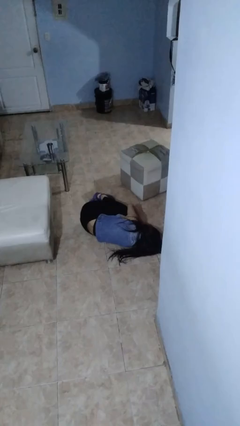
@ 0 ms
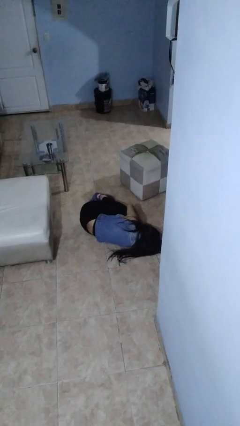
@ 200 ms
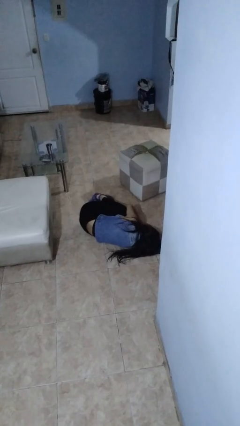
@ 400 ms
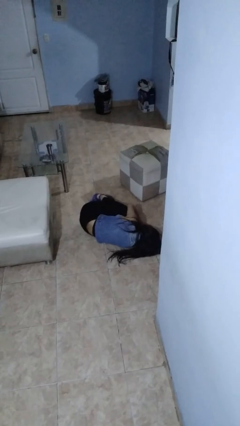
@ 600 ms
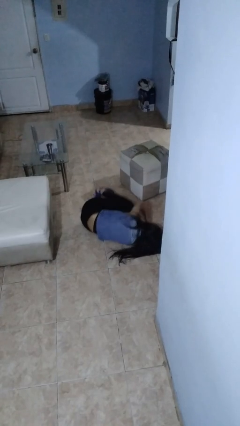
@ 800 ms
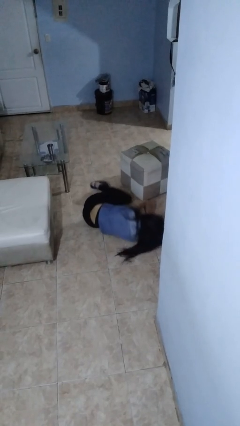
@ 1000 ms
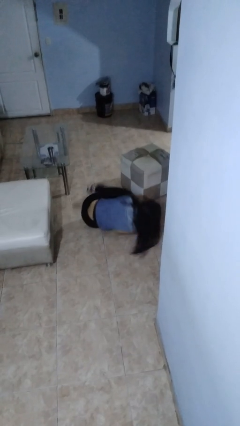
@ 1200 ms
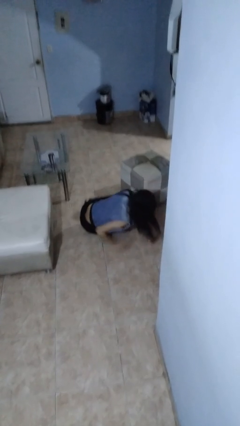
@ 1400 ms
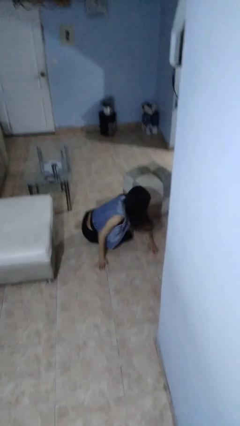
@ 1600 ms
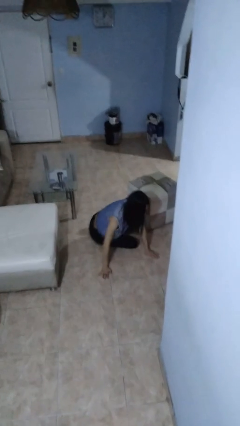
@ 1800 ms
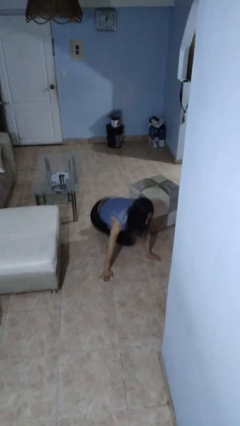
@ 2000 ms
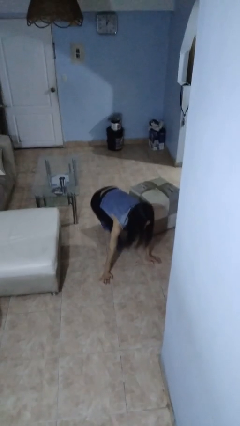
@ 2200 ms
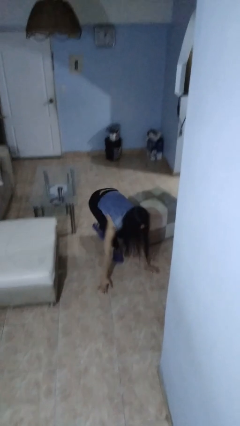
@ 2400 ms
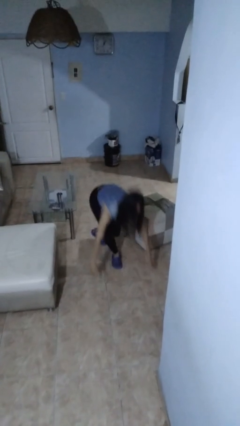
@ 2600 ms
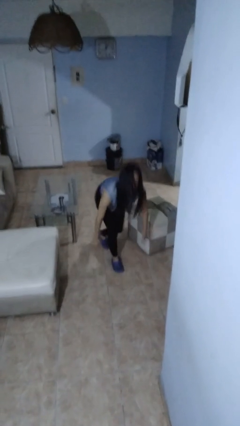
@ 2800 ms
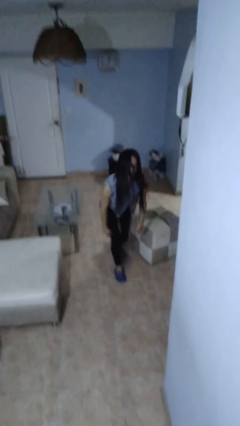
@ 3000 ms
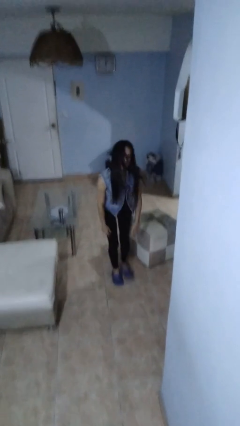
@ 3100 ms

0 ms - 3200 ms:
person stands up from floor

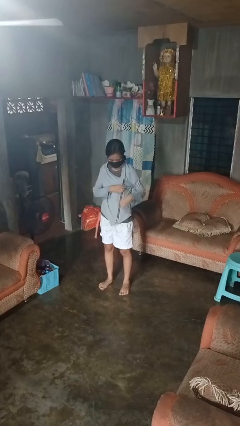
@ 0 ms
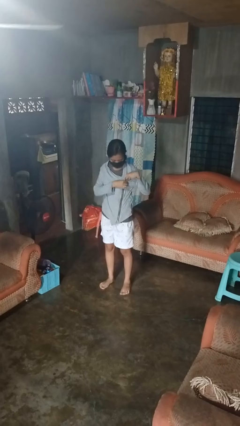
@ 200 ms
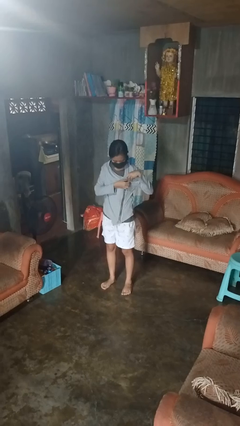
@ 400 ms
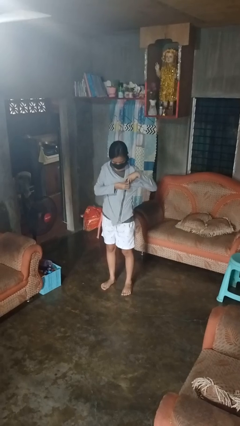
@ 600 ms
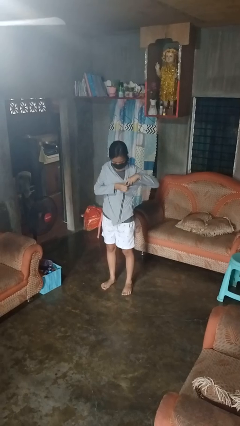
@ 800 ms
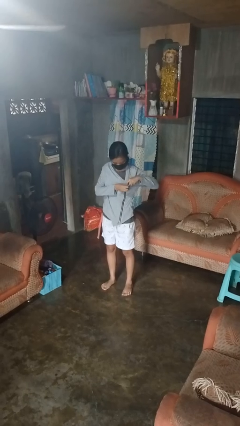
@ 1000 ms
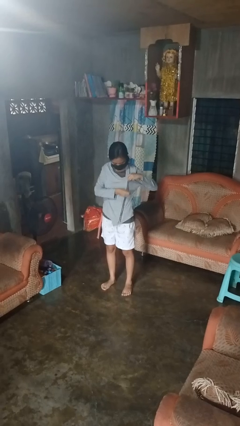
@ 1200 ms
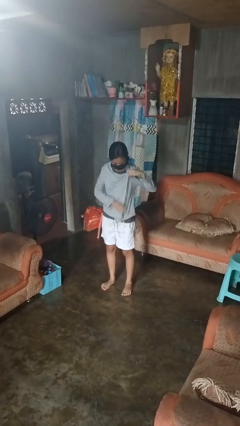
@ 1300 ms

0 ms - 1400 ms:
person unzips jacket

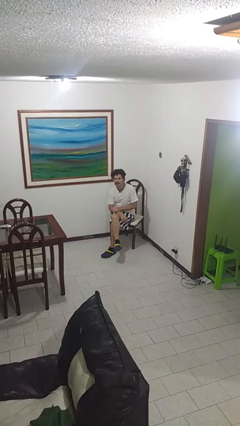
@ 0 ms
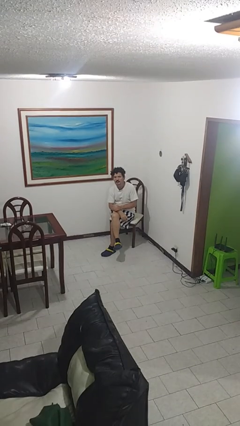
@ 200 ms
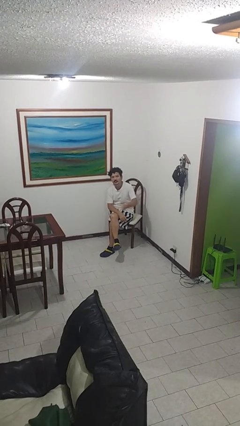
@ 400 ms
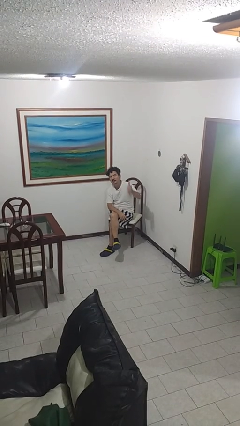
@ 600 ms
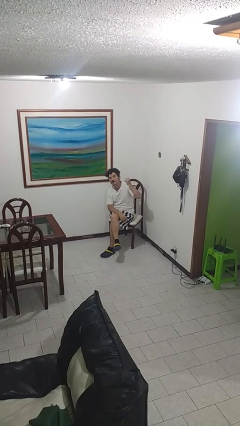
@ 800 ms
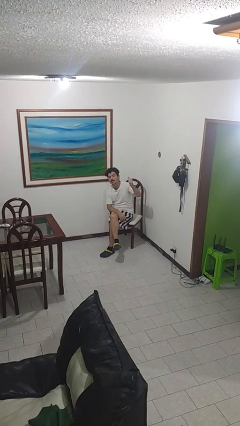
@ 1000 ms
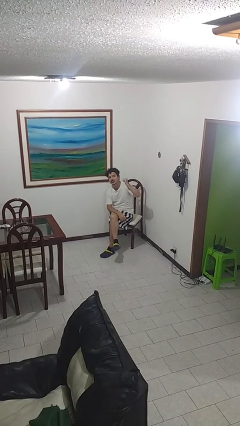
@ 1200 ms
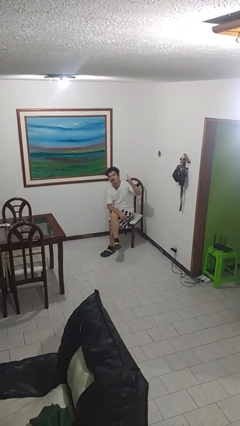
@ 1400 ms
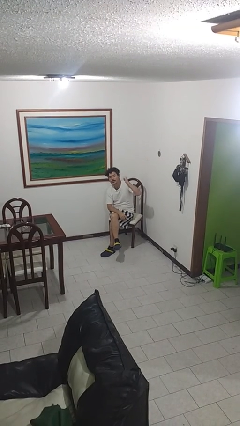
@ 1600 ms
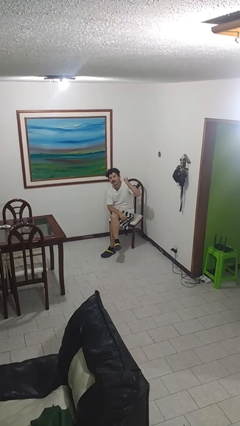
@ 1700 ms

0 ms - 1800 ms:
person gestures behind me

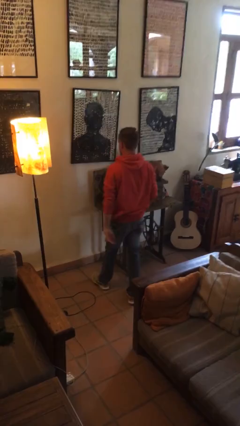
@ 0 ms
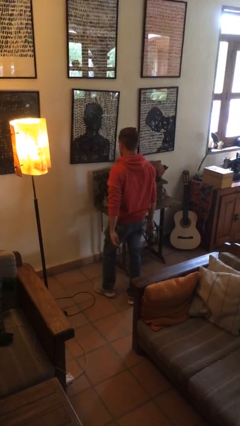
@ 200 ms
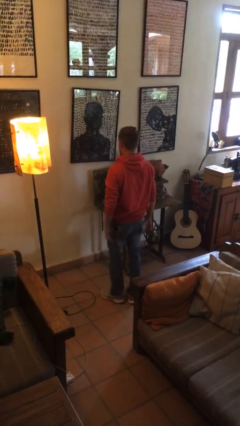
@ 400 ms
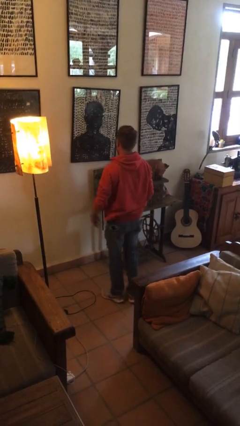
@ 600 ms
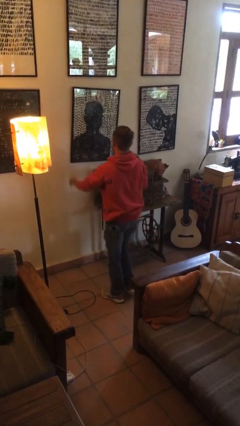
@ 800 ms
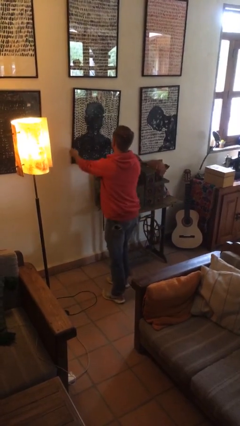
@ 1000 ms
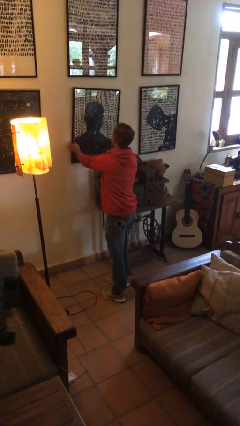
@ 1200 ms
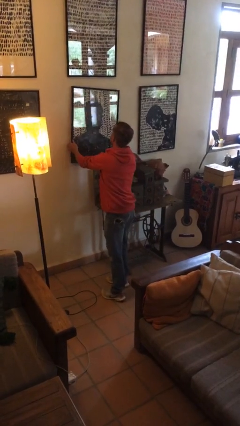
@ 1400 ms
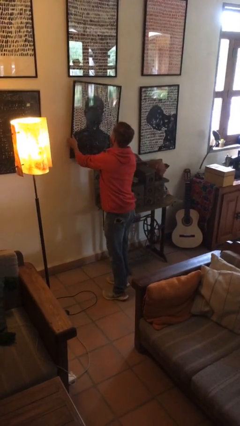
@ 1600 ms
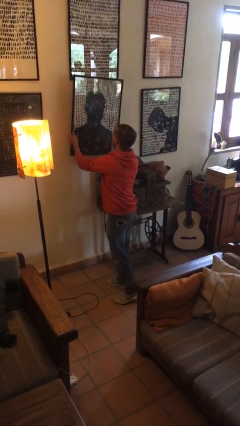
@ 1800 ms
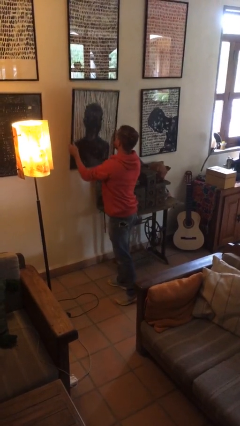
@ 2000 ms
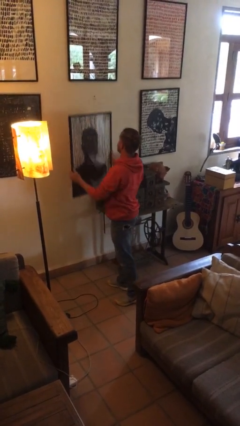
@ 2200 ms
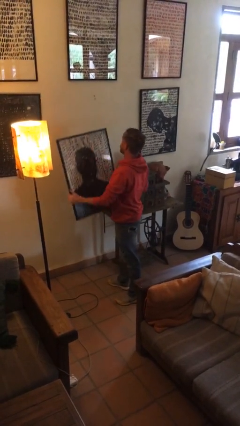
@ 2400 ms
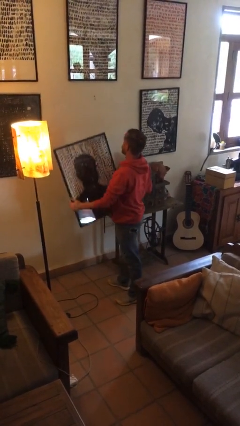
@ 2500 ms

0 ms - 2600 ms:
person takes down picture frame

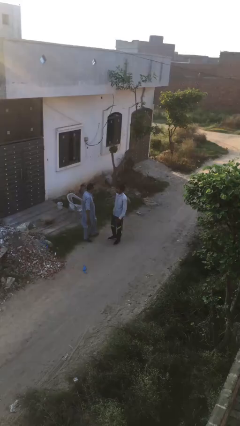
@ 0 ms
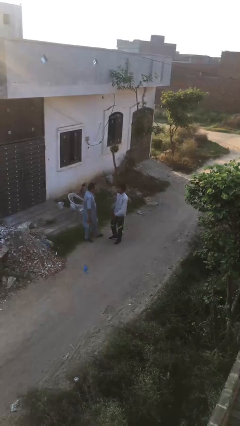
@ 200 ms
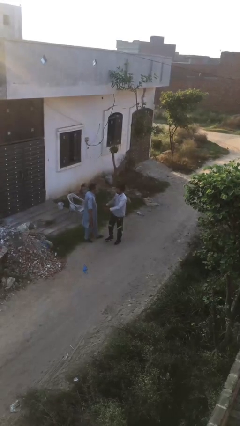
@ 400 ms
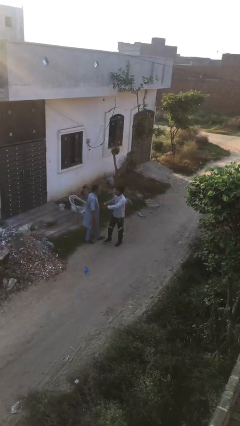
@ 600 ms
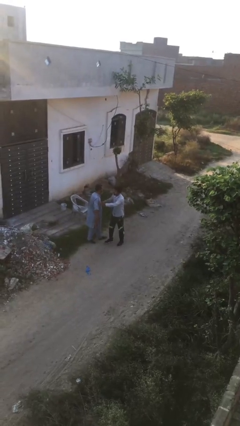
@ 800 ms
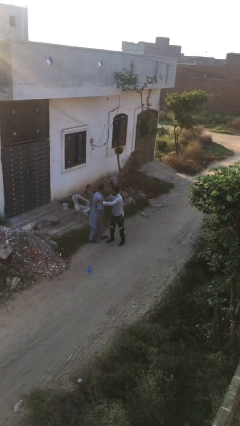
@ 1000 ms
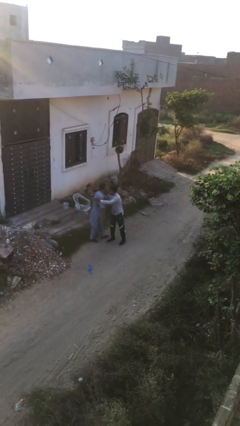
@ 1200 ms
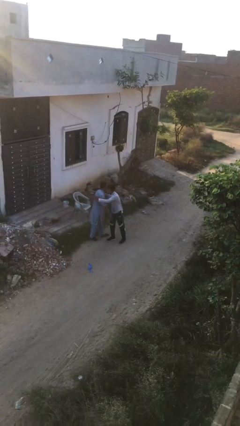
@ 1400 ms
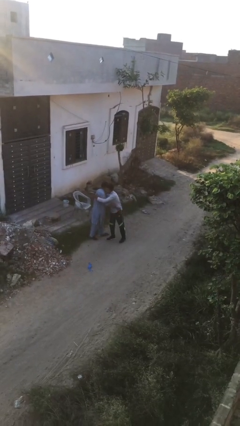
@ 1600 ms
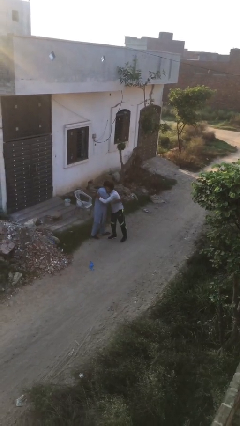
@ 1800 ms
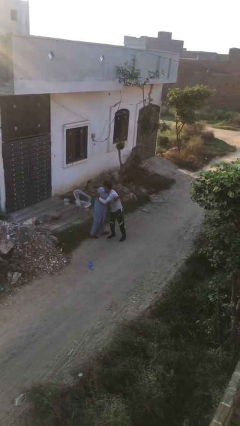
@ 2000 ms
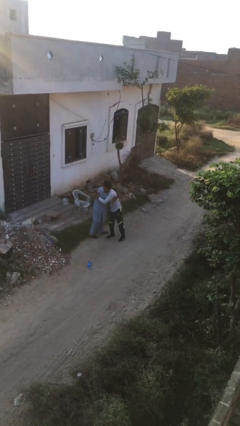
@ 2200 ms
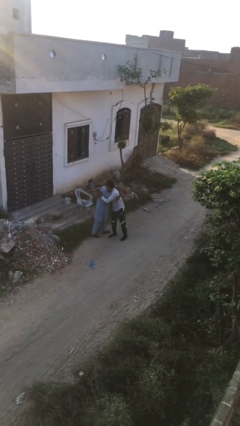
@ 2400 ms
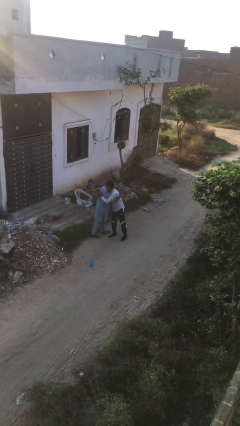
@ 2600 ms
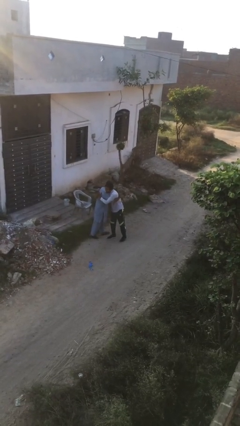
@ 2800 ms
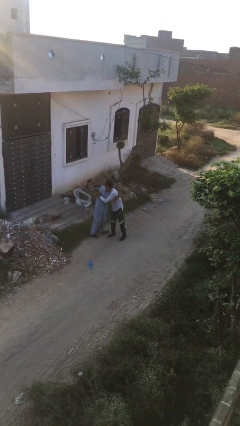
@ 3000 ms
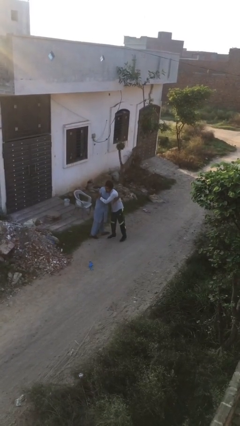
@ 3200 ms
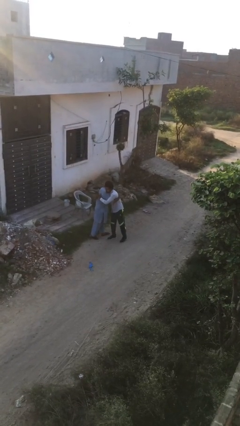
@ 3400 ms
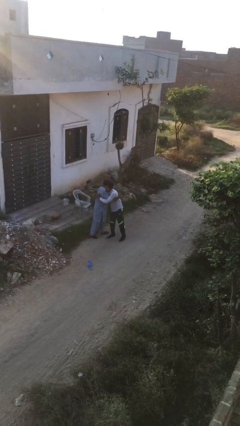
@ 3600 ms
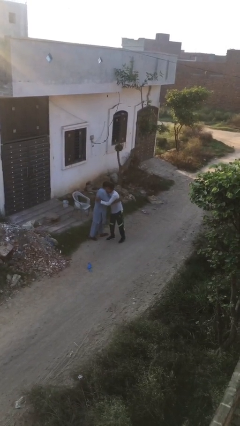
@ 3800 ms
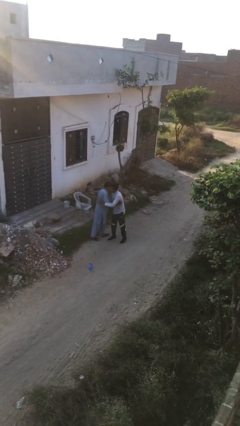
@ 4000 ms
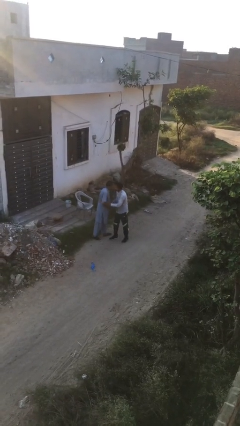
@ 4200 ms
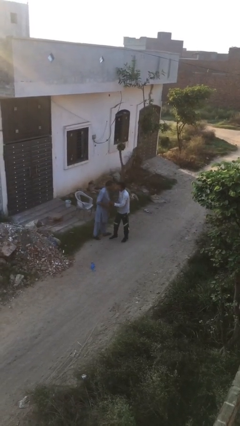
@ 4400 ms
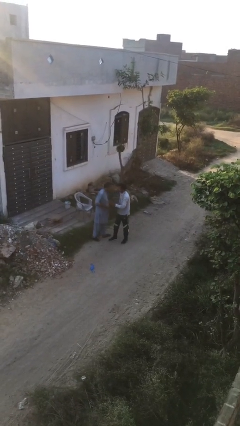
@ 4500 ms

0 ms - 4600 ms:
person embraces person

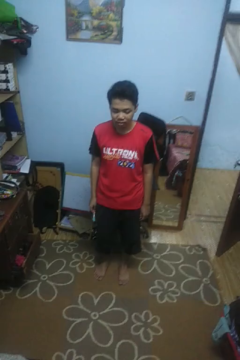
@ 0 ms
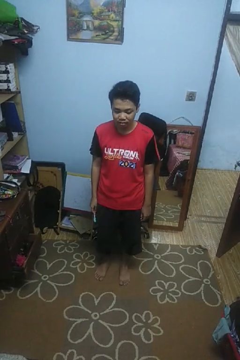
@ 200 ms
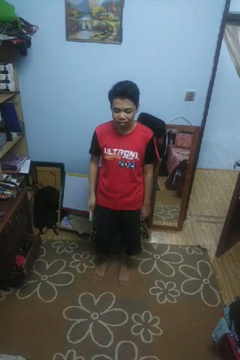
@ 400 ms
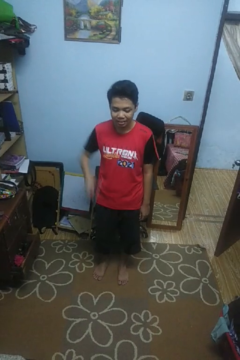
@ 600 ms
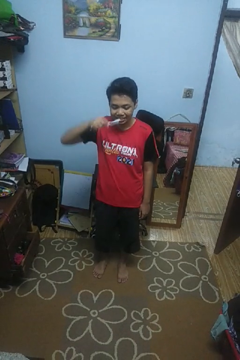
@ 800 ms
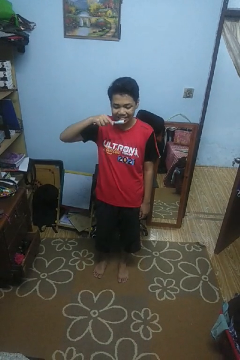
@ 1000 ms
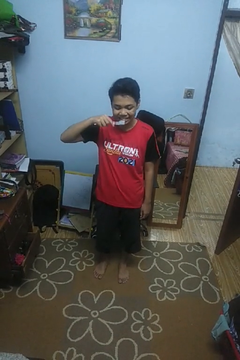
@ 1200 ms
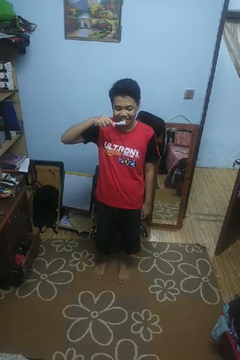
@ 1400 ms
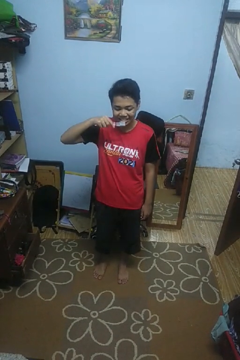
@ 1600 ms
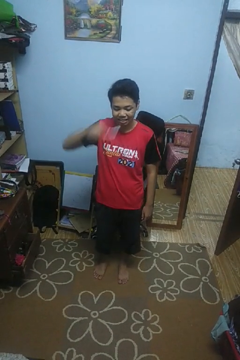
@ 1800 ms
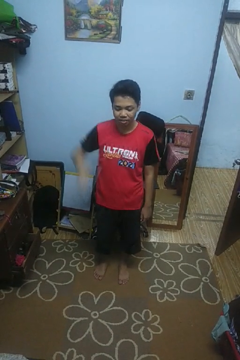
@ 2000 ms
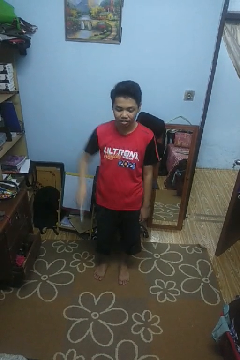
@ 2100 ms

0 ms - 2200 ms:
person brushes teeth

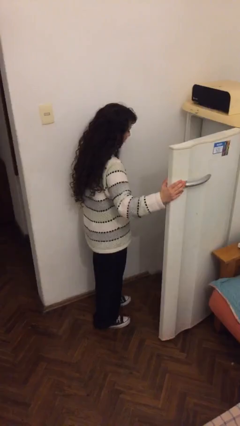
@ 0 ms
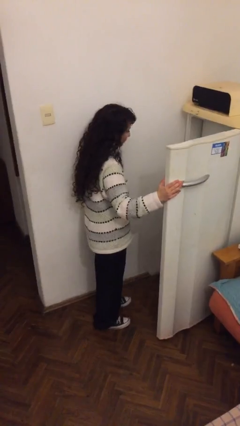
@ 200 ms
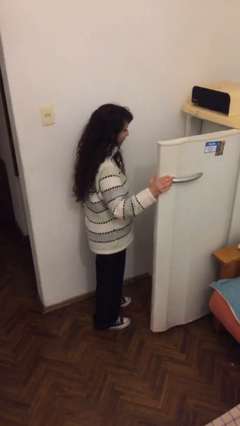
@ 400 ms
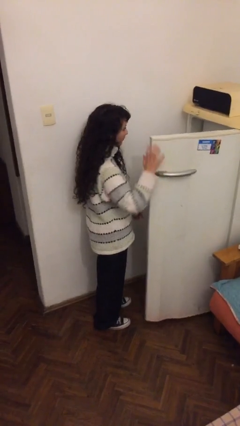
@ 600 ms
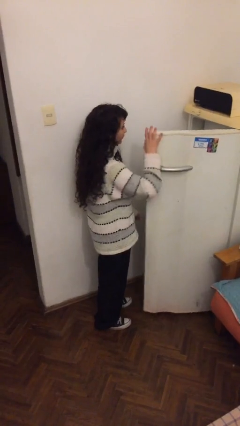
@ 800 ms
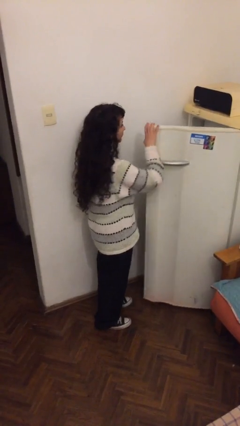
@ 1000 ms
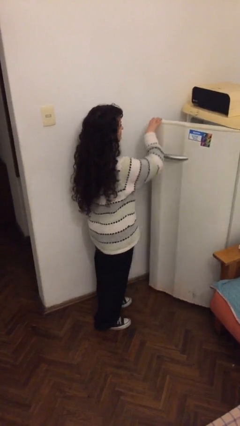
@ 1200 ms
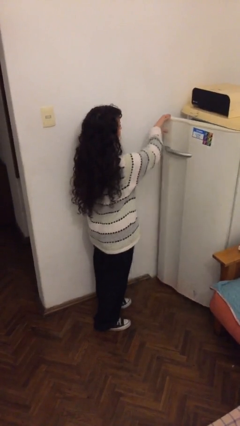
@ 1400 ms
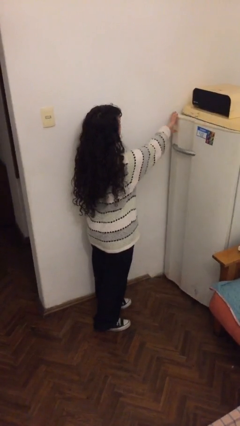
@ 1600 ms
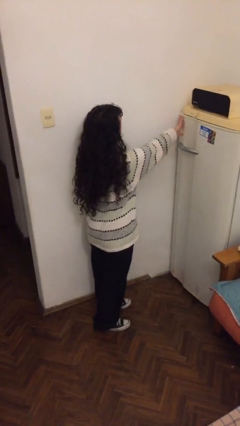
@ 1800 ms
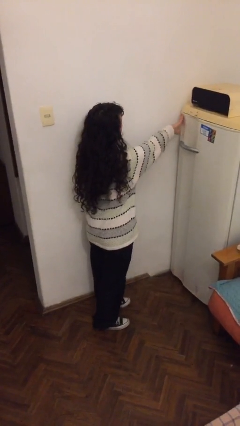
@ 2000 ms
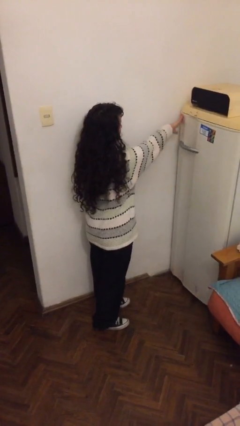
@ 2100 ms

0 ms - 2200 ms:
person closes refrigerator
